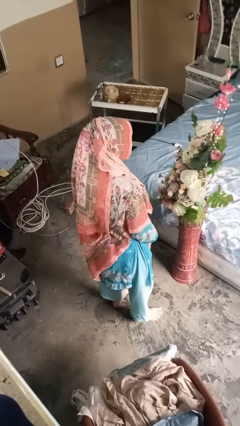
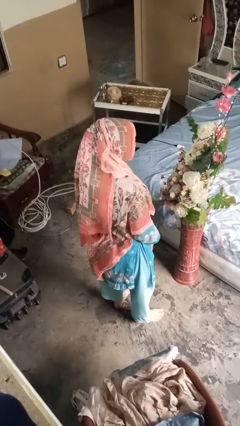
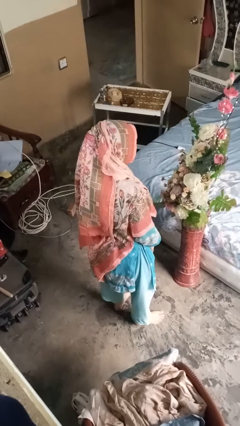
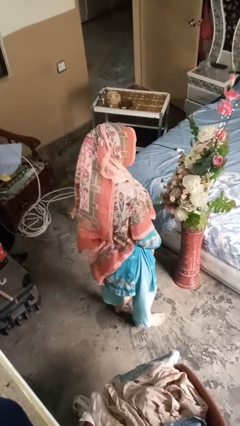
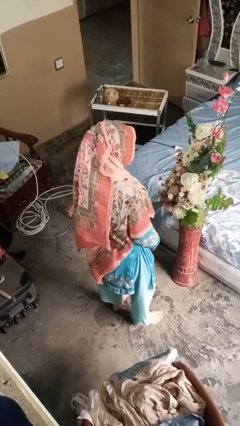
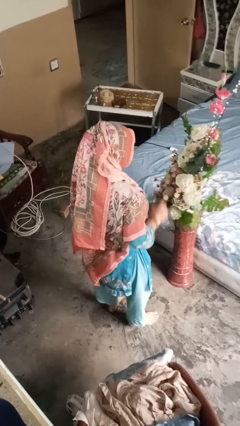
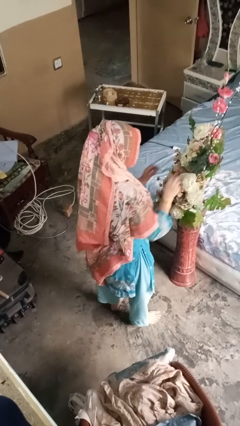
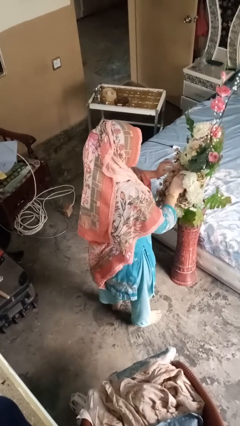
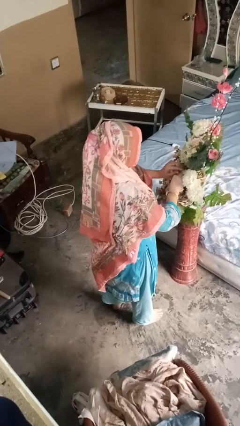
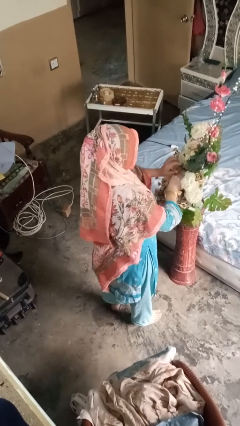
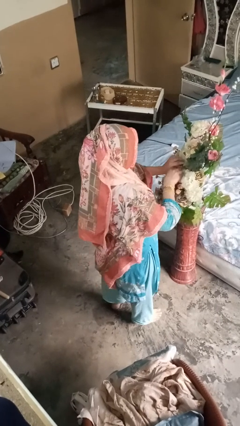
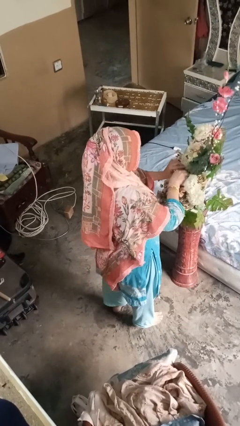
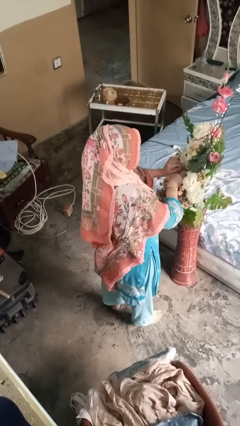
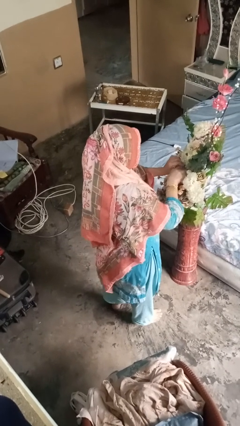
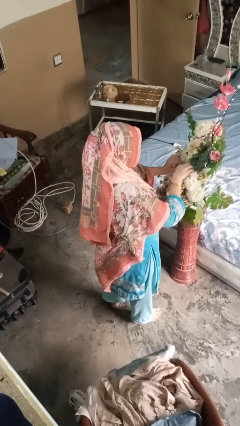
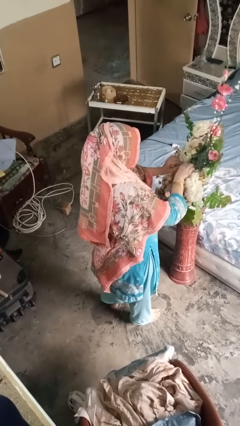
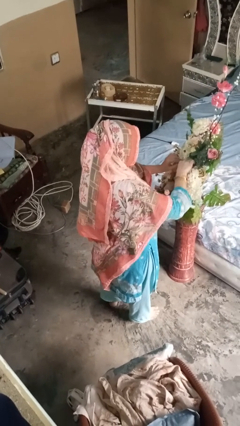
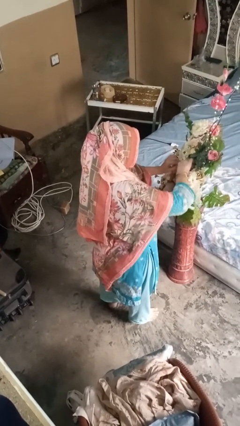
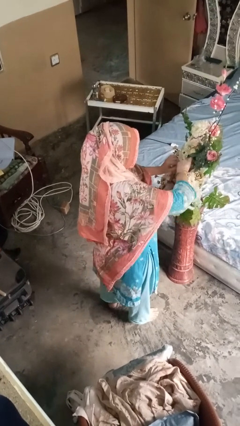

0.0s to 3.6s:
person arranges flowers in vase

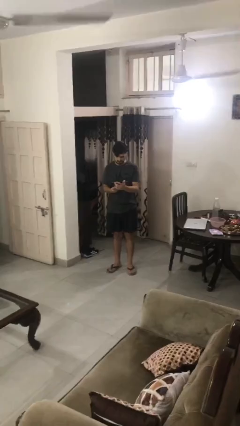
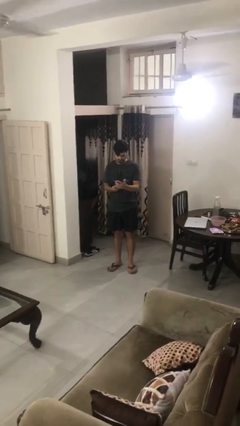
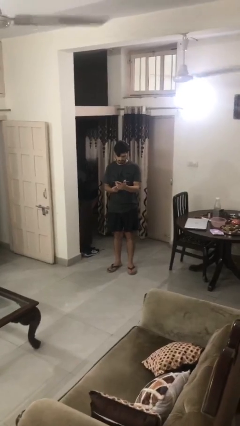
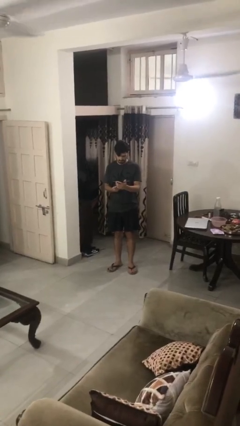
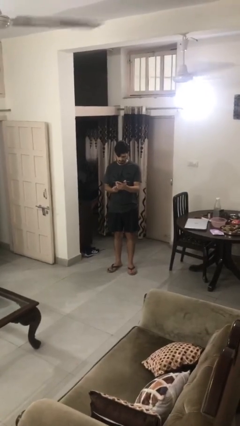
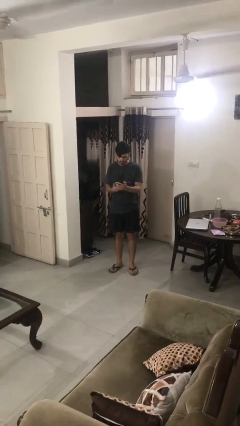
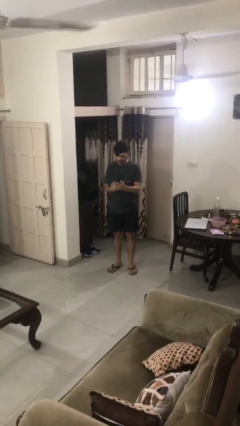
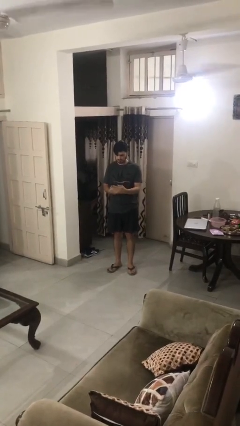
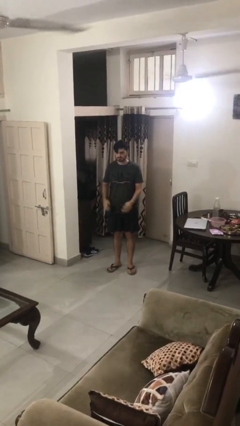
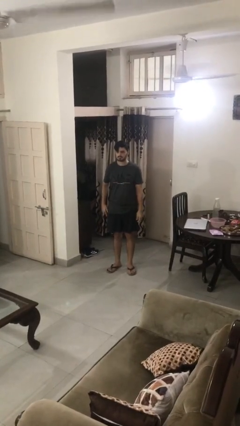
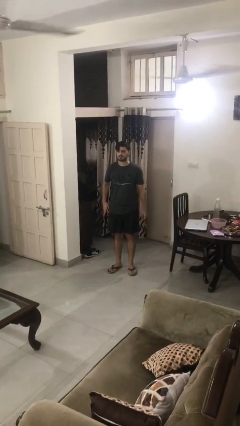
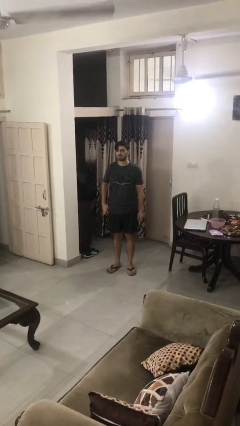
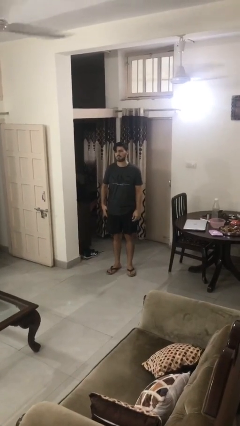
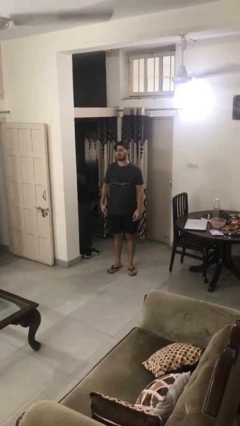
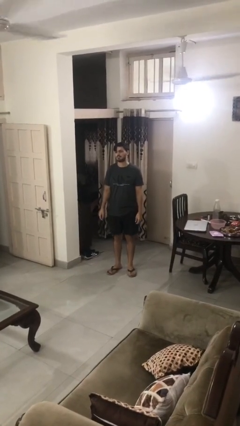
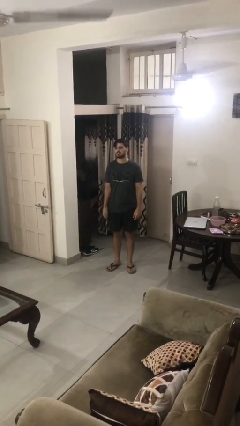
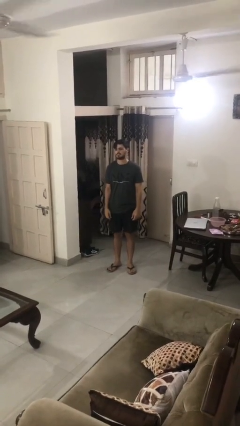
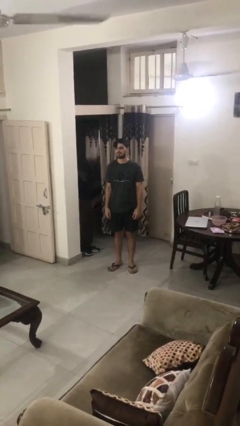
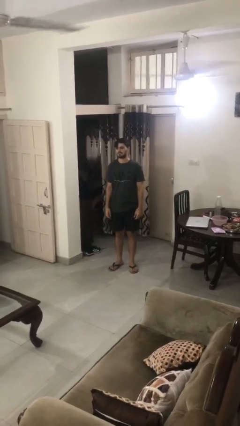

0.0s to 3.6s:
person puts phone into pocket

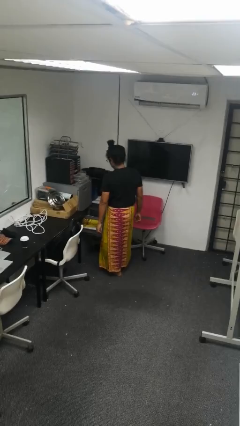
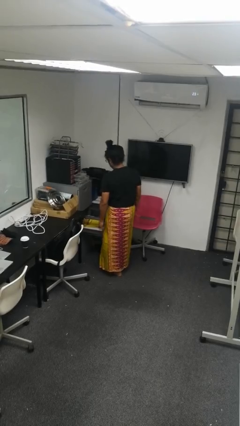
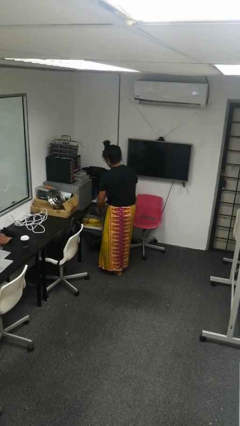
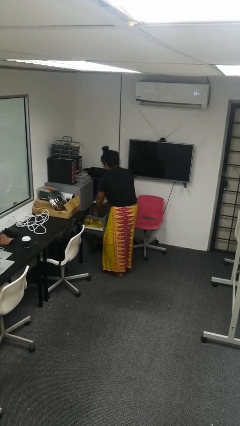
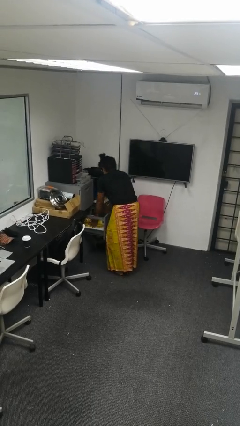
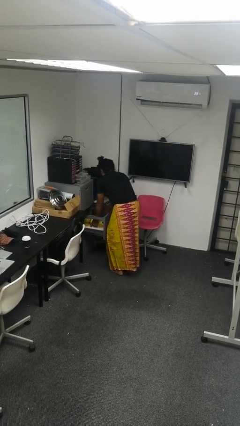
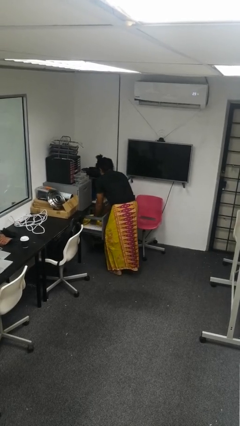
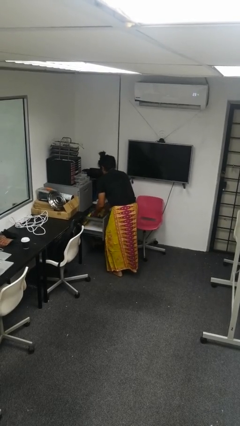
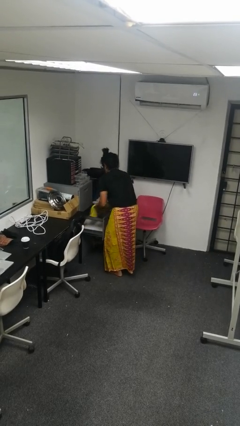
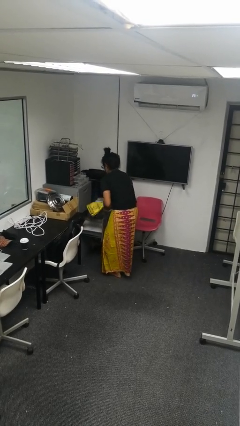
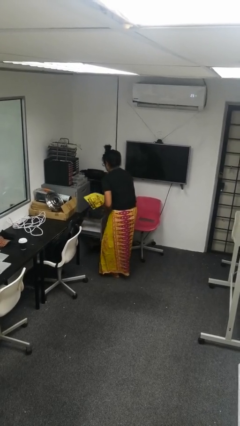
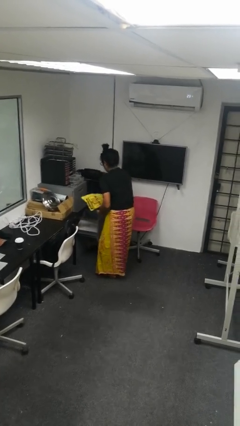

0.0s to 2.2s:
person takes clothes from dresser

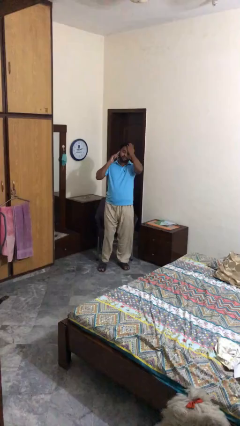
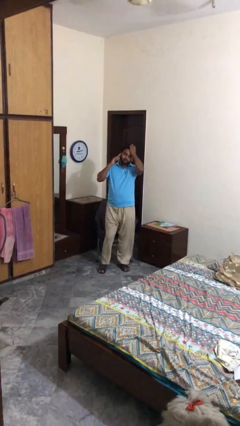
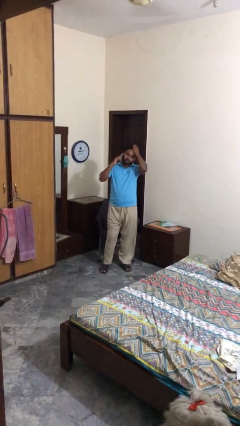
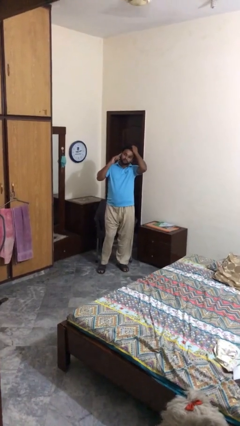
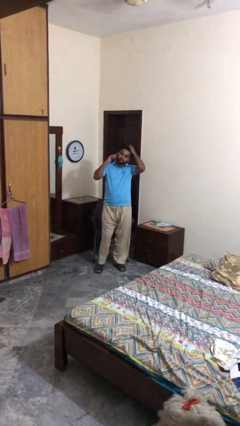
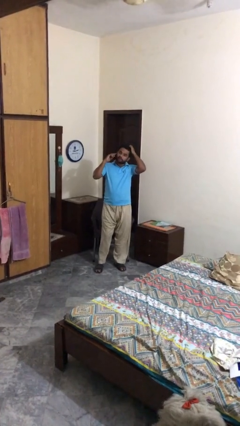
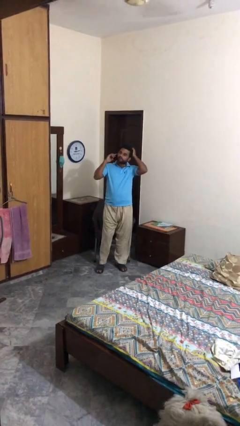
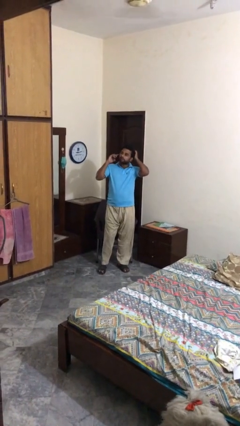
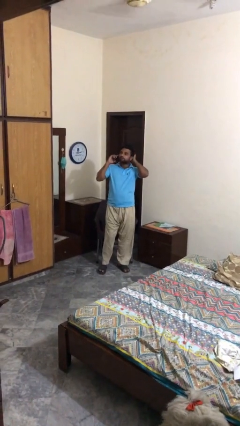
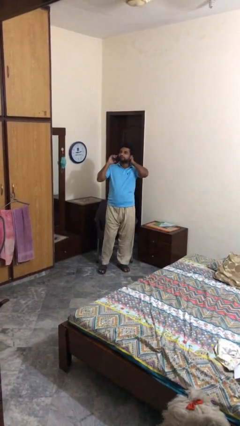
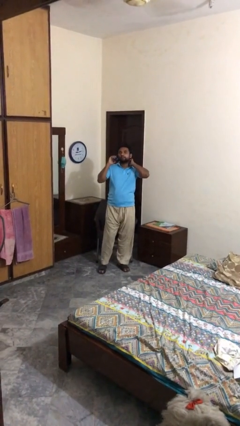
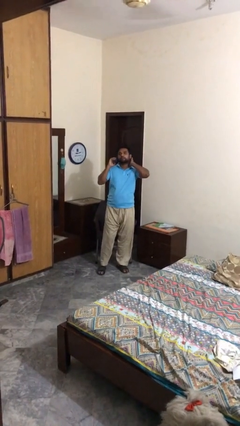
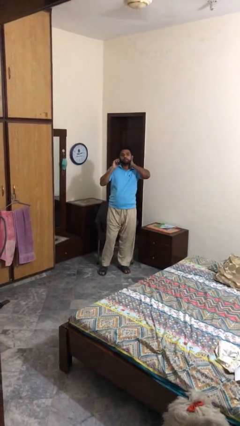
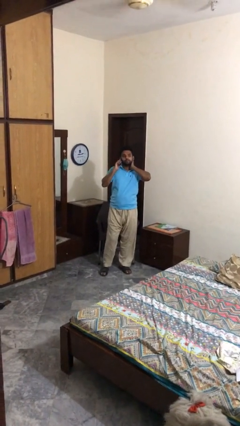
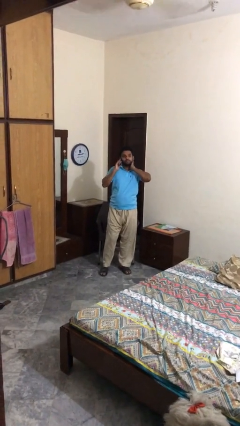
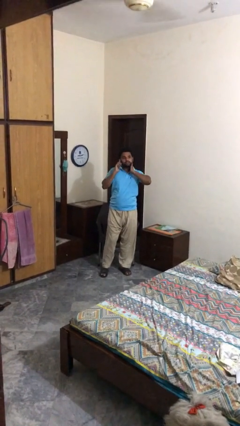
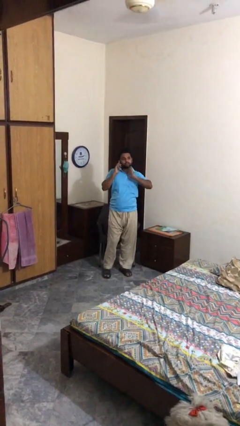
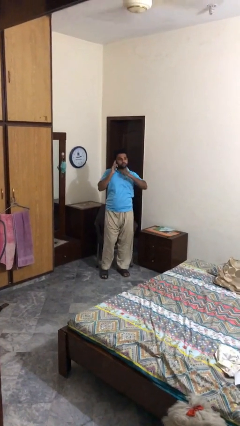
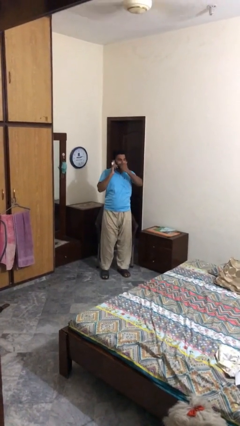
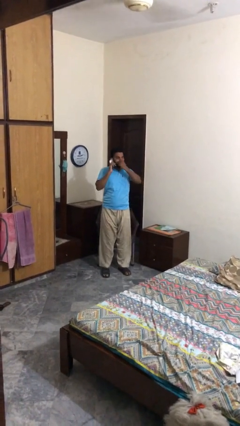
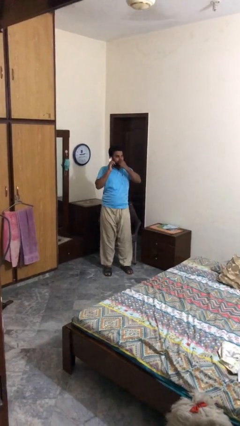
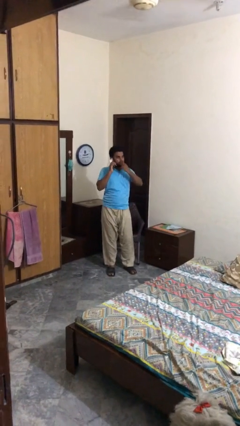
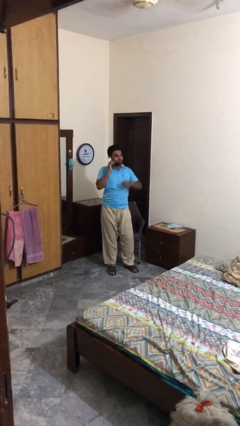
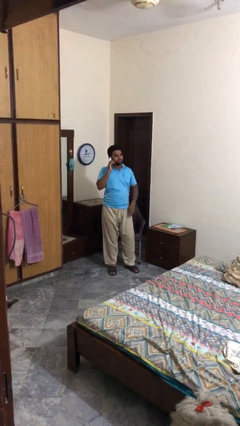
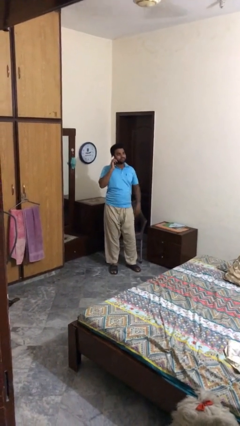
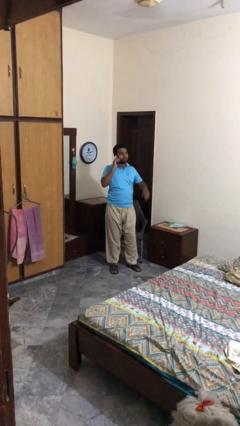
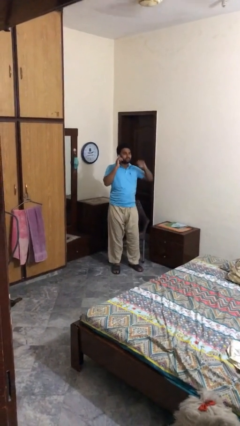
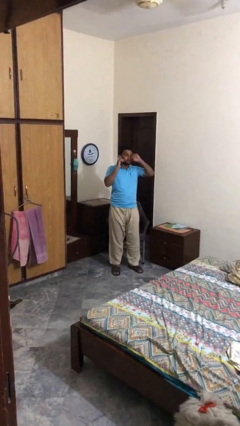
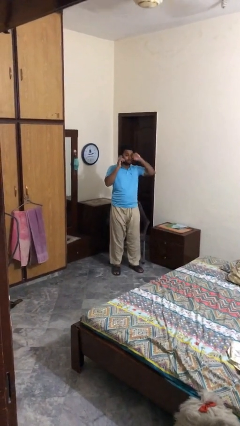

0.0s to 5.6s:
person talks on phone

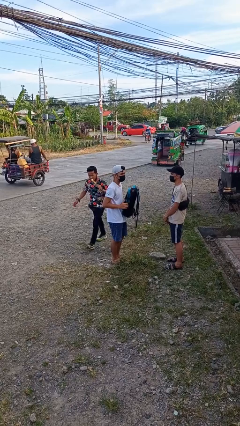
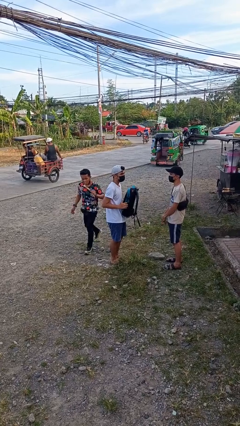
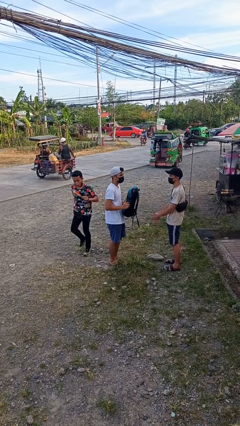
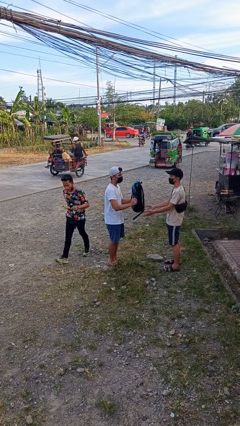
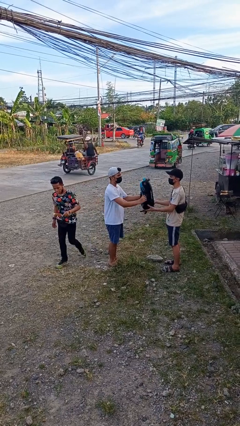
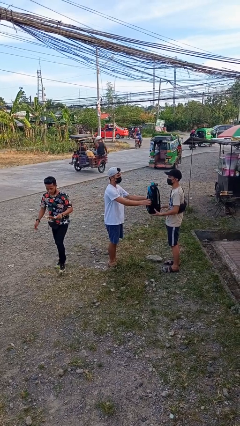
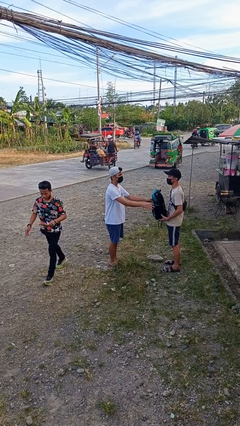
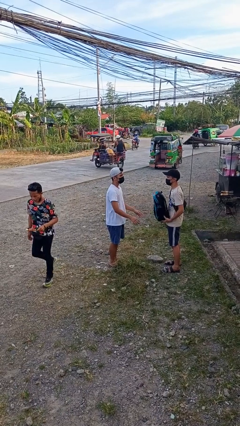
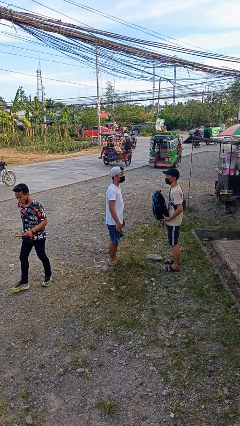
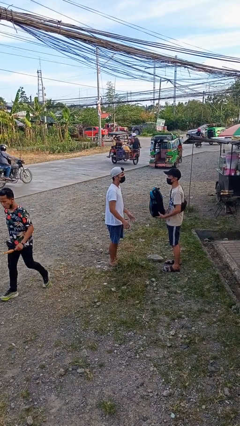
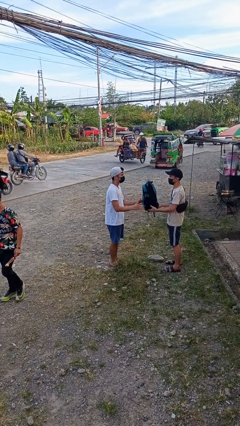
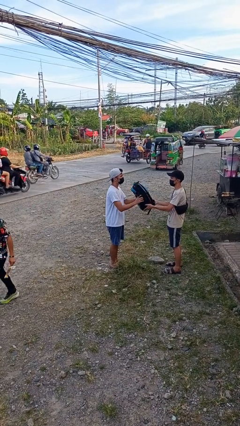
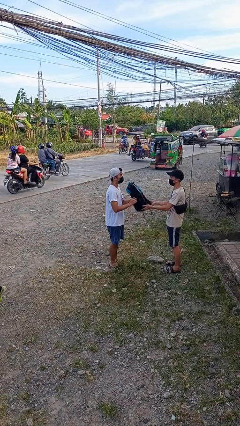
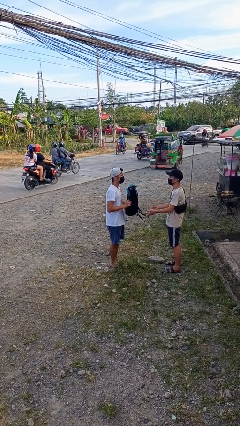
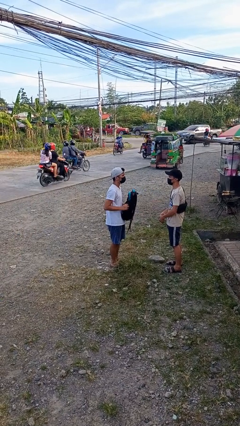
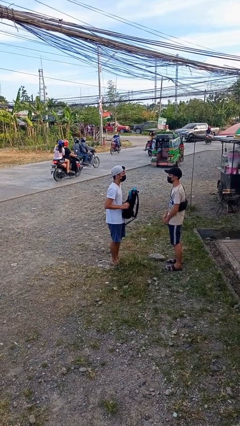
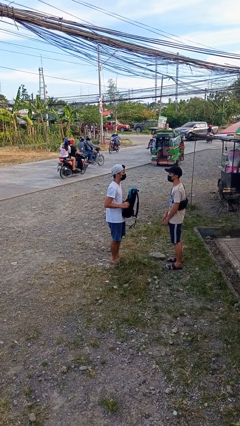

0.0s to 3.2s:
person transfers object to person
